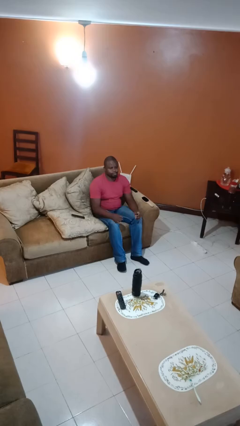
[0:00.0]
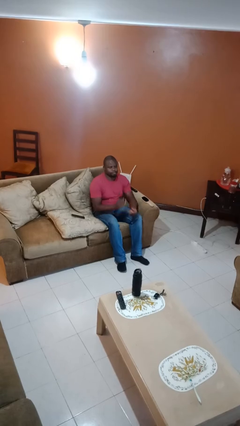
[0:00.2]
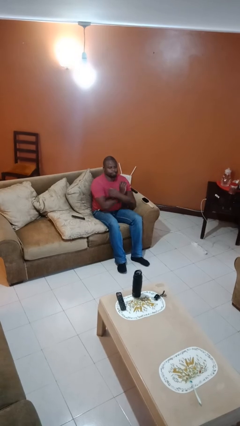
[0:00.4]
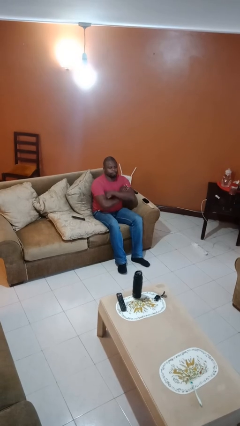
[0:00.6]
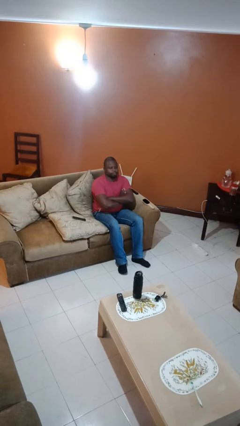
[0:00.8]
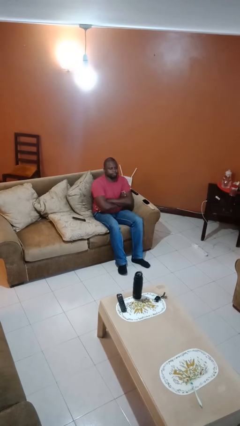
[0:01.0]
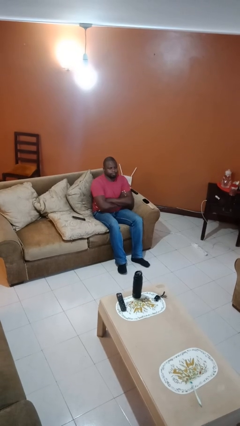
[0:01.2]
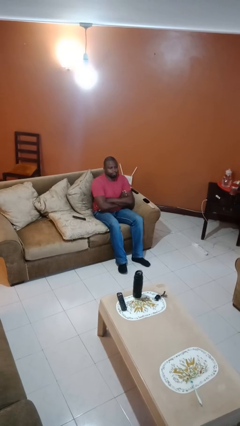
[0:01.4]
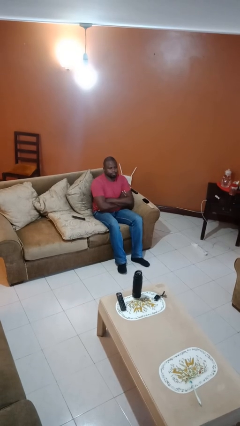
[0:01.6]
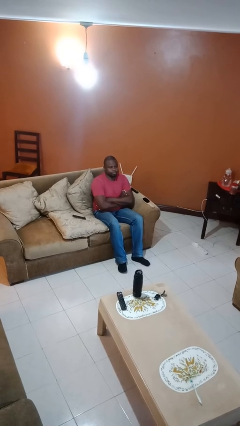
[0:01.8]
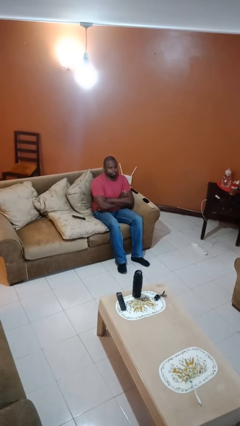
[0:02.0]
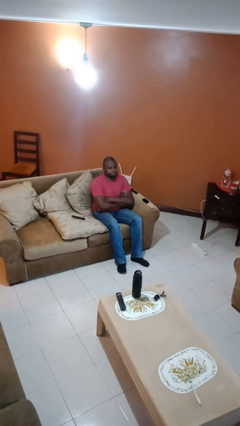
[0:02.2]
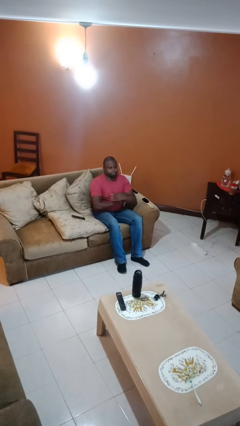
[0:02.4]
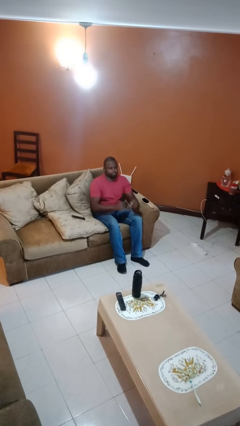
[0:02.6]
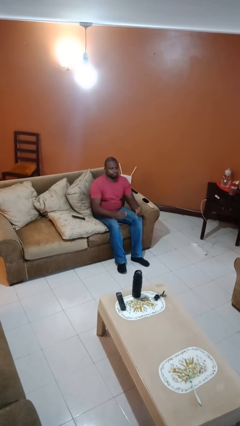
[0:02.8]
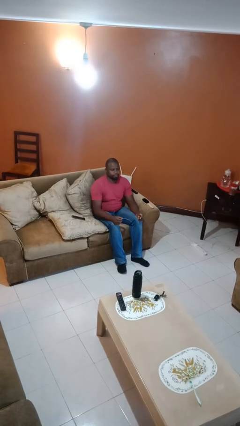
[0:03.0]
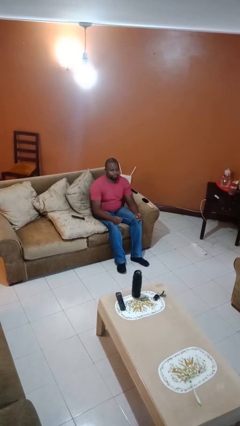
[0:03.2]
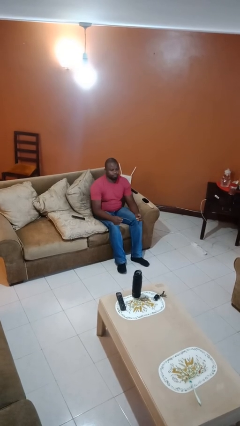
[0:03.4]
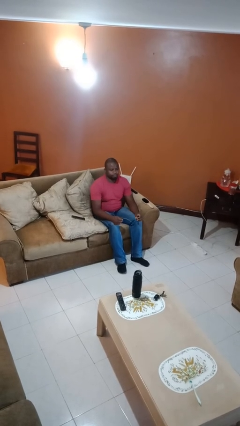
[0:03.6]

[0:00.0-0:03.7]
person crosses arms

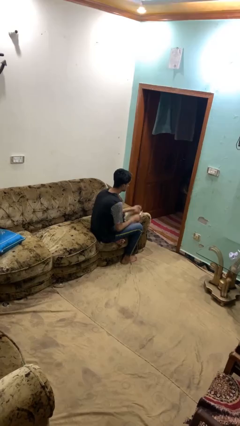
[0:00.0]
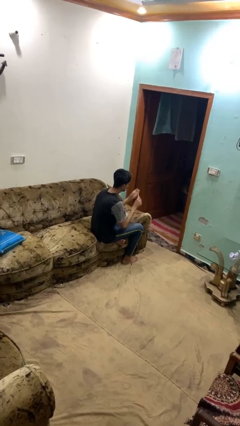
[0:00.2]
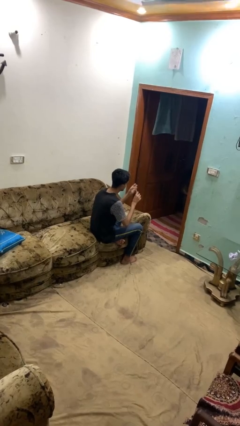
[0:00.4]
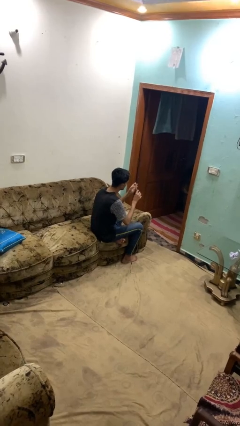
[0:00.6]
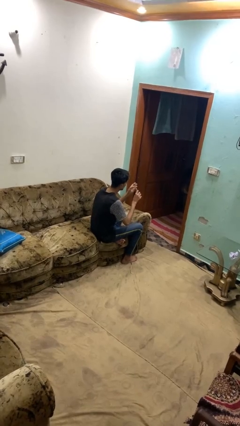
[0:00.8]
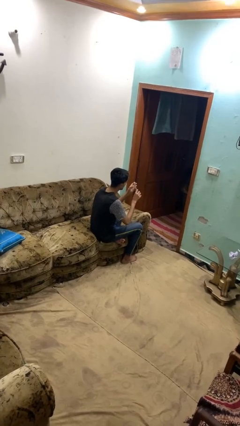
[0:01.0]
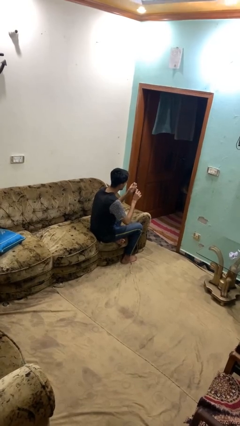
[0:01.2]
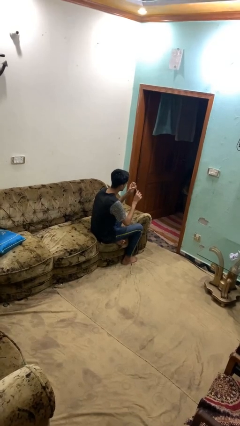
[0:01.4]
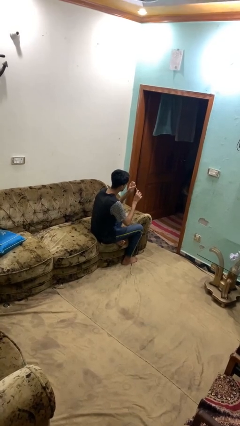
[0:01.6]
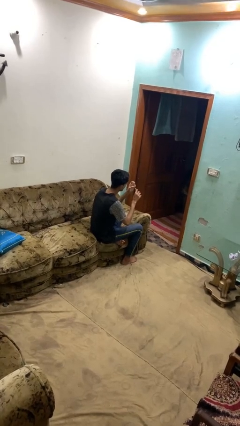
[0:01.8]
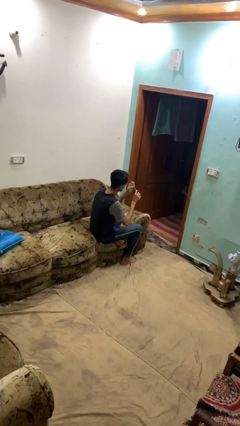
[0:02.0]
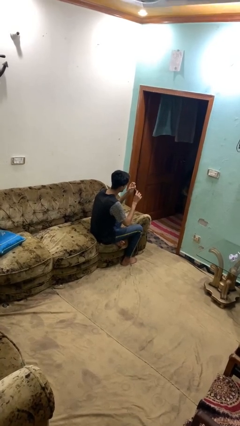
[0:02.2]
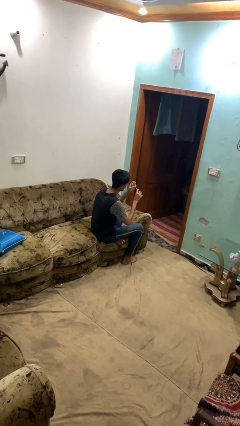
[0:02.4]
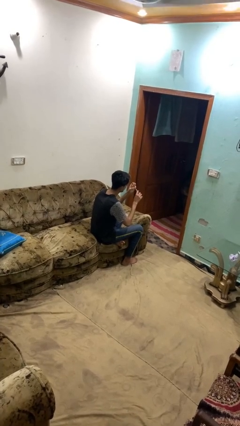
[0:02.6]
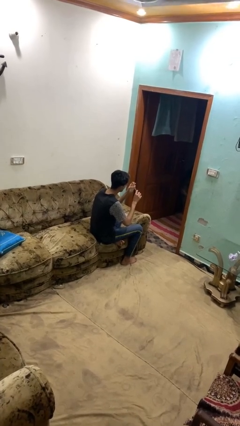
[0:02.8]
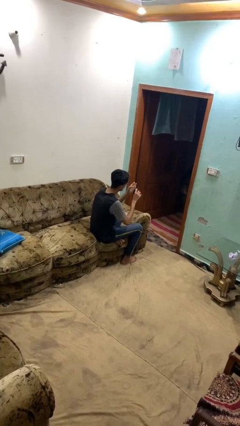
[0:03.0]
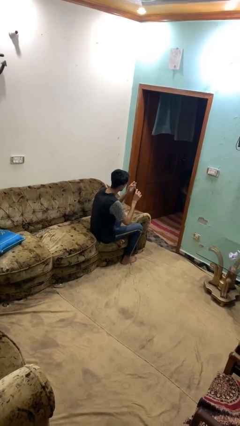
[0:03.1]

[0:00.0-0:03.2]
person files fingernails

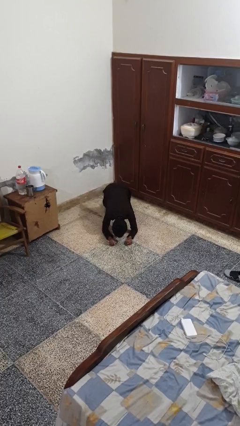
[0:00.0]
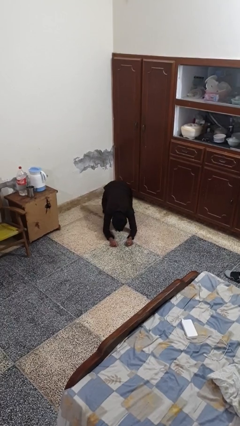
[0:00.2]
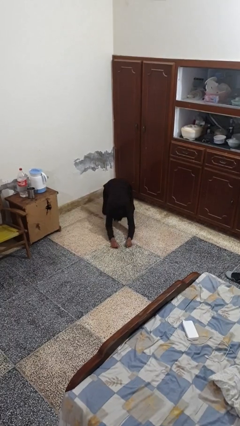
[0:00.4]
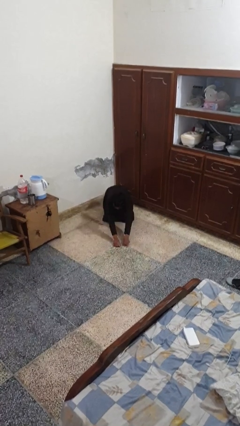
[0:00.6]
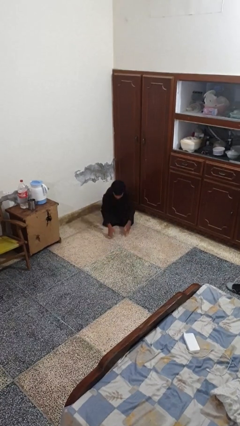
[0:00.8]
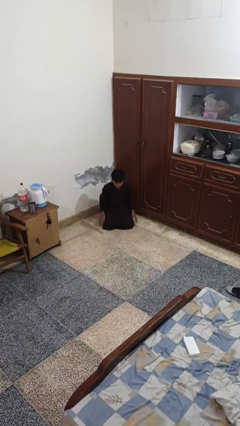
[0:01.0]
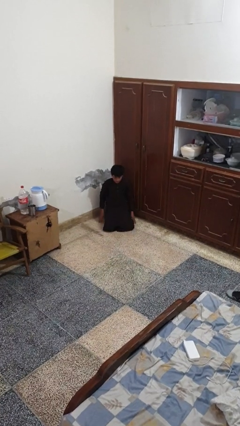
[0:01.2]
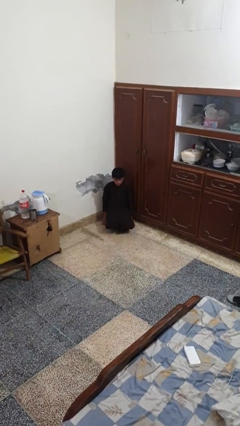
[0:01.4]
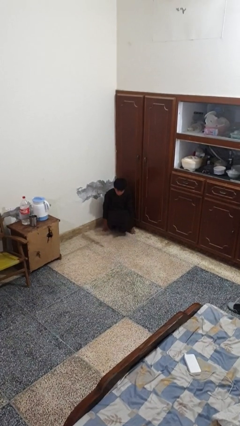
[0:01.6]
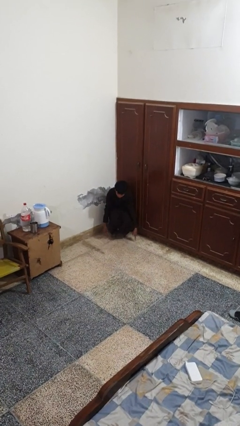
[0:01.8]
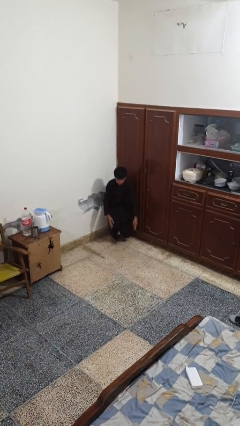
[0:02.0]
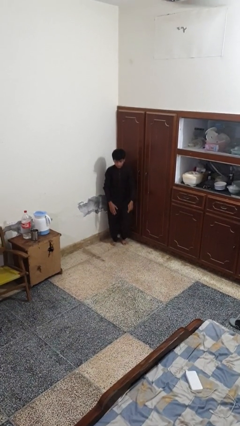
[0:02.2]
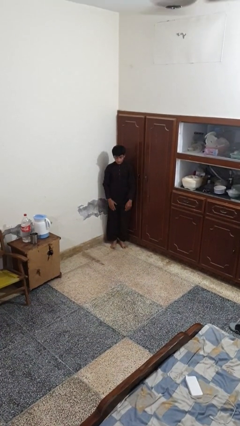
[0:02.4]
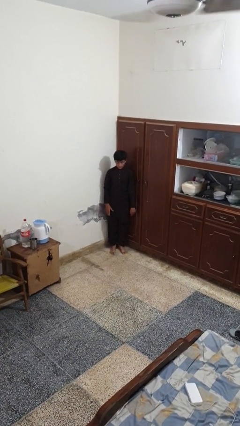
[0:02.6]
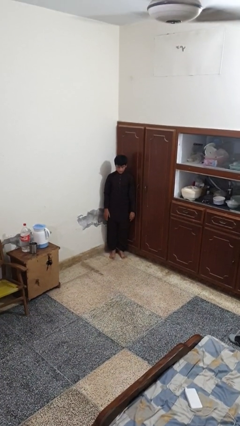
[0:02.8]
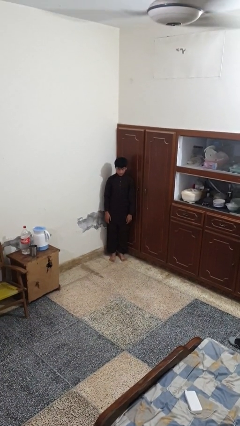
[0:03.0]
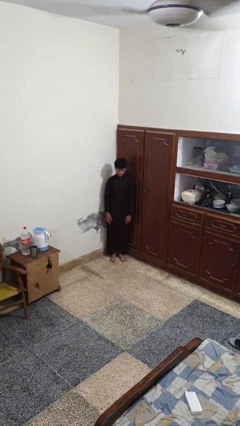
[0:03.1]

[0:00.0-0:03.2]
person stands up from floor

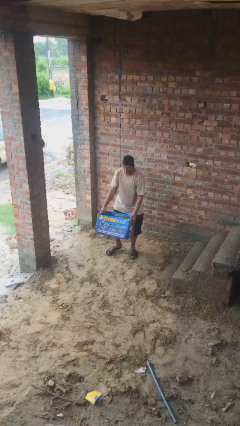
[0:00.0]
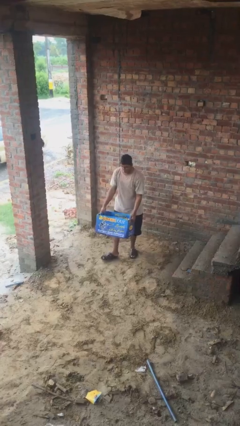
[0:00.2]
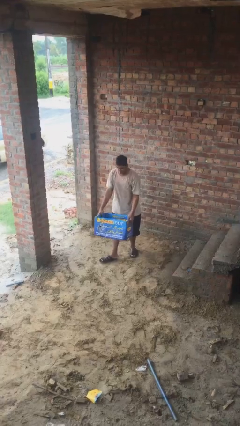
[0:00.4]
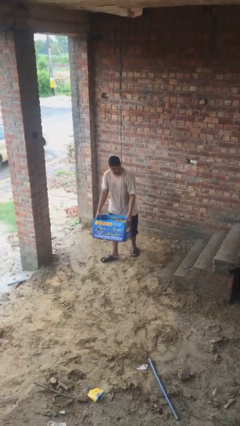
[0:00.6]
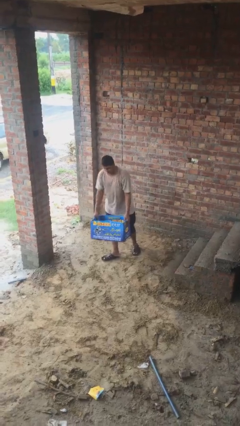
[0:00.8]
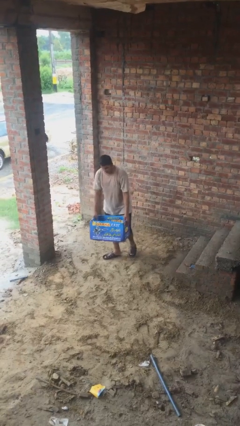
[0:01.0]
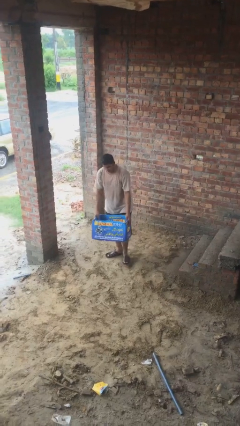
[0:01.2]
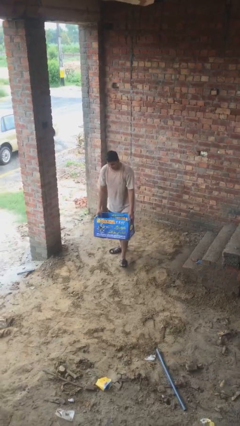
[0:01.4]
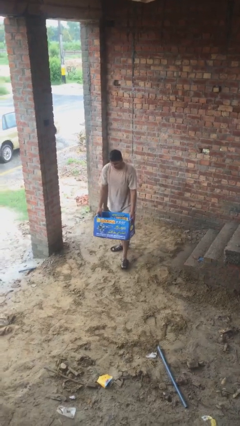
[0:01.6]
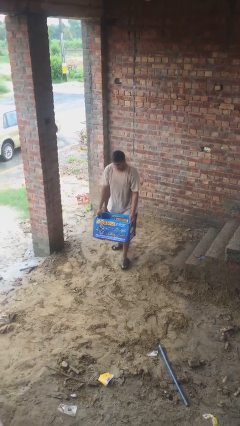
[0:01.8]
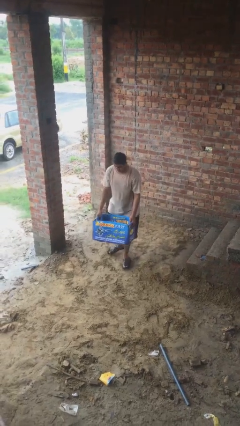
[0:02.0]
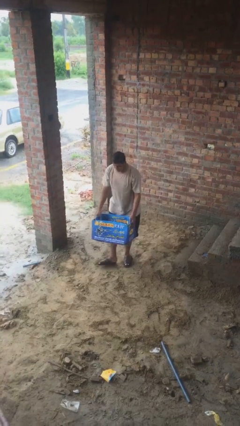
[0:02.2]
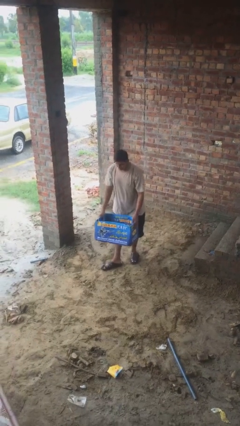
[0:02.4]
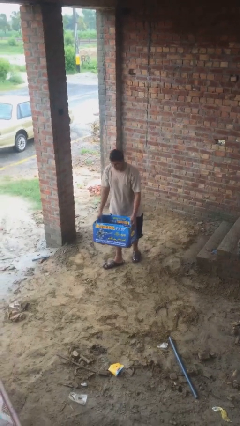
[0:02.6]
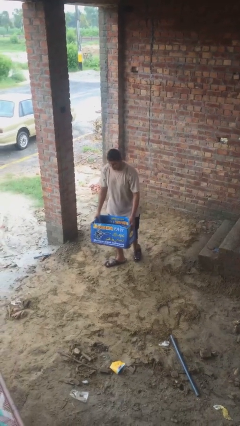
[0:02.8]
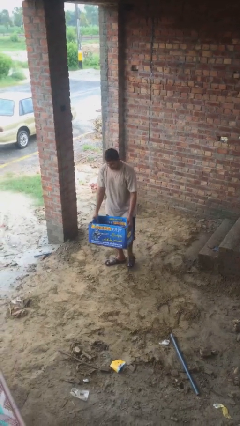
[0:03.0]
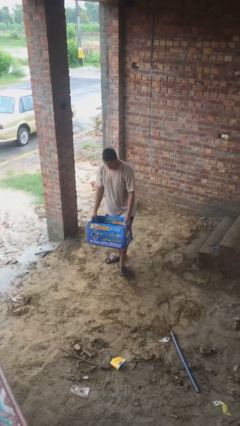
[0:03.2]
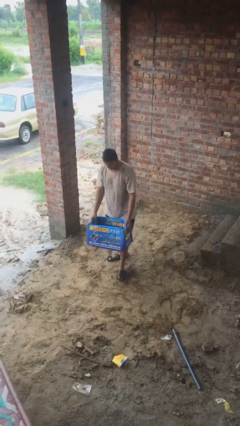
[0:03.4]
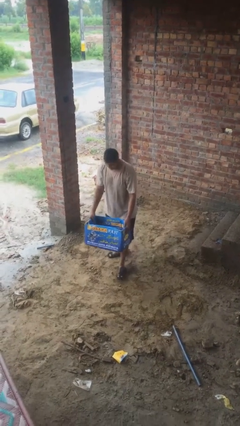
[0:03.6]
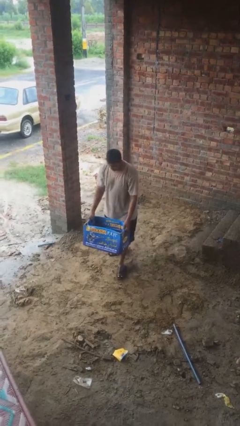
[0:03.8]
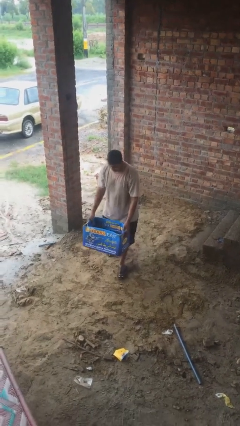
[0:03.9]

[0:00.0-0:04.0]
person carries heavy object

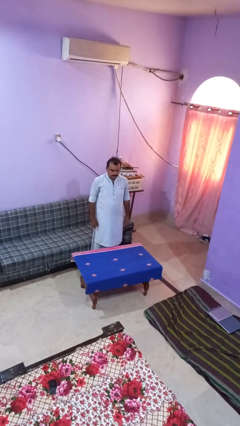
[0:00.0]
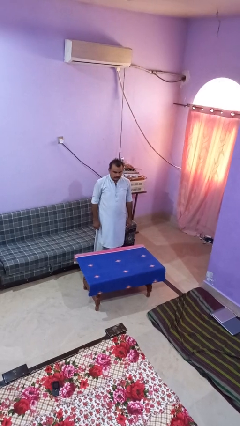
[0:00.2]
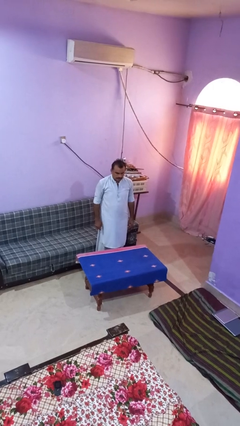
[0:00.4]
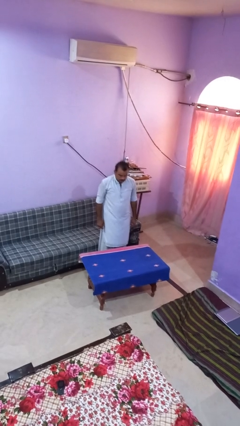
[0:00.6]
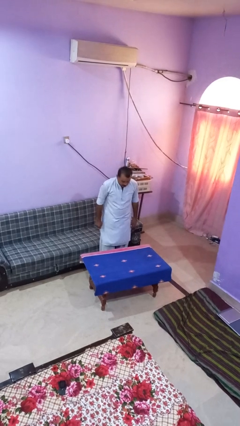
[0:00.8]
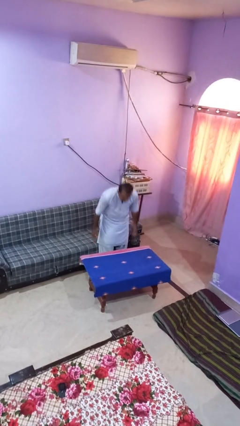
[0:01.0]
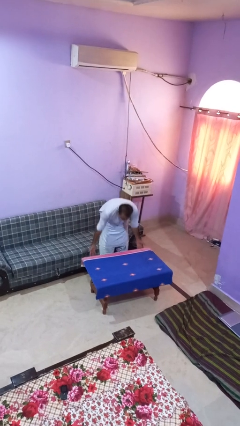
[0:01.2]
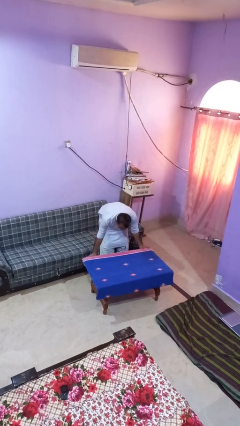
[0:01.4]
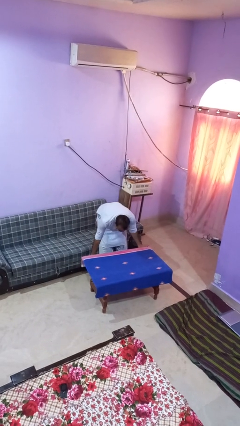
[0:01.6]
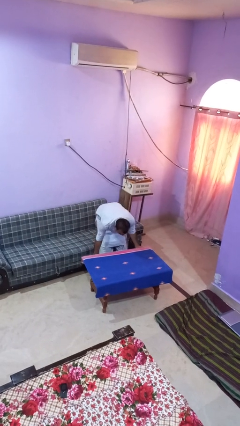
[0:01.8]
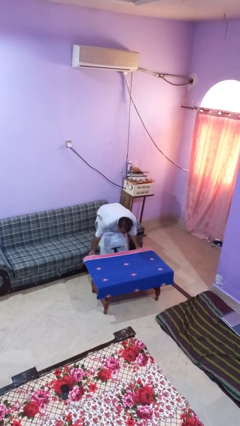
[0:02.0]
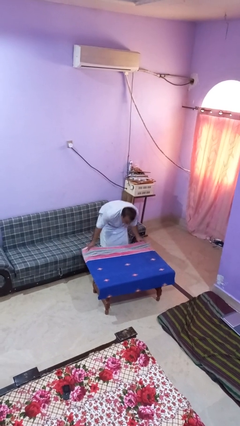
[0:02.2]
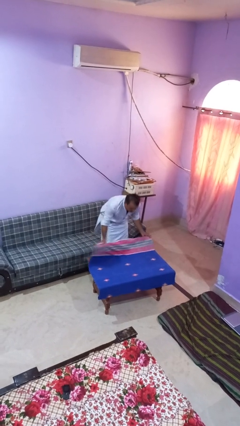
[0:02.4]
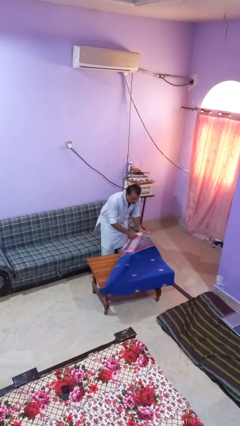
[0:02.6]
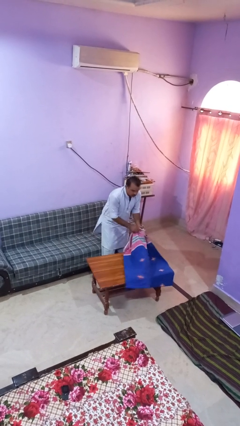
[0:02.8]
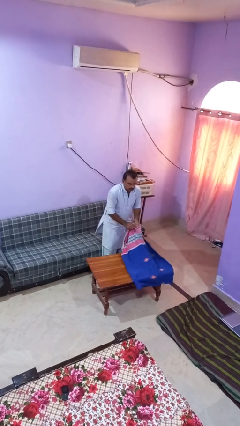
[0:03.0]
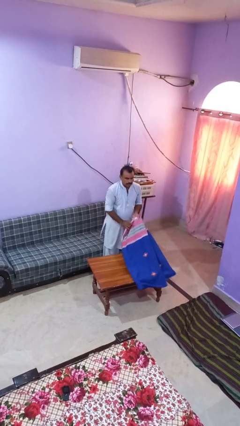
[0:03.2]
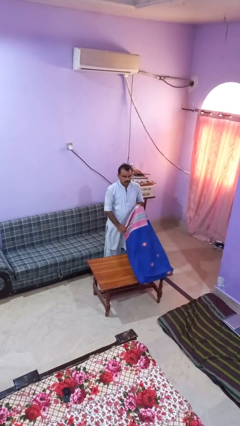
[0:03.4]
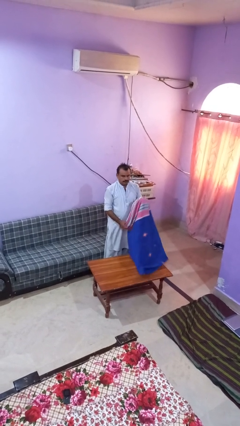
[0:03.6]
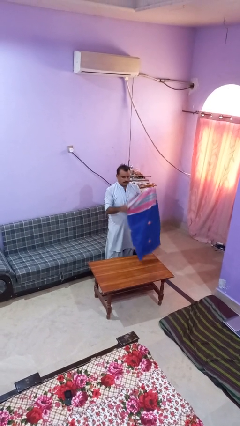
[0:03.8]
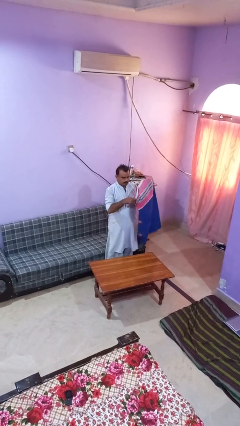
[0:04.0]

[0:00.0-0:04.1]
person folds tablecloth
